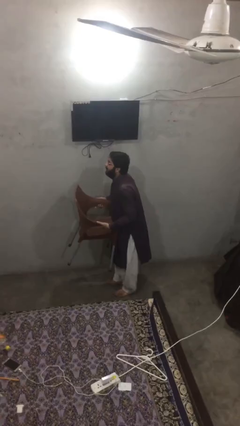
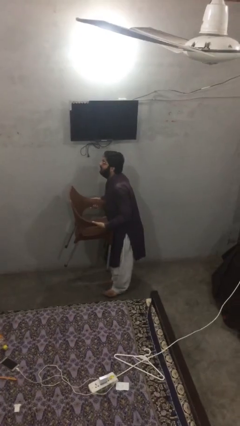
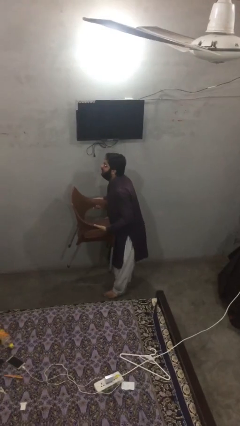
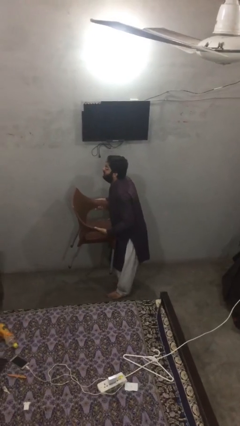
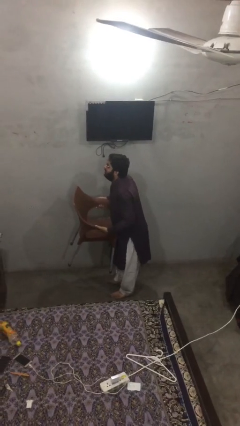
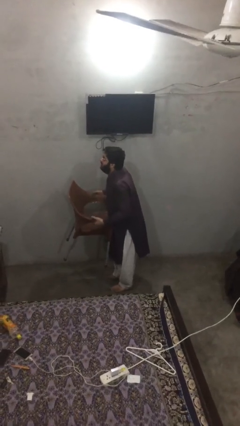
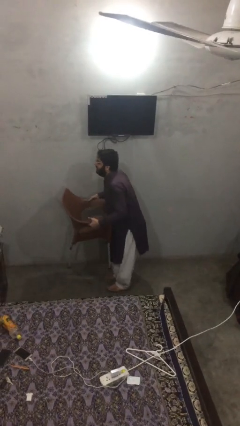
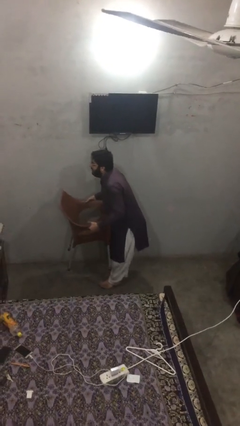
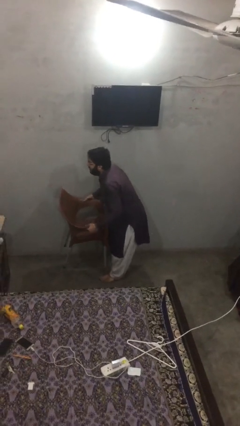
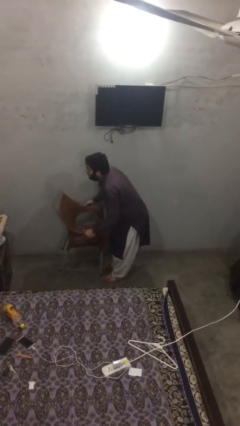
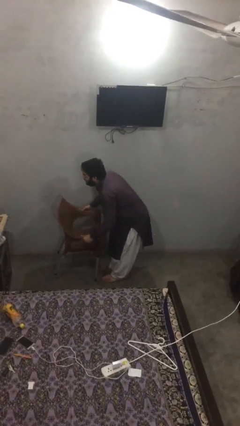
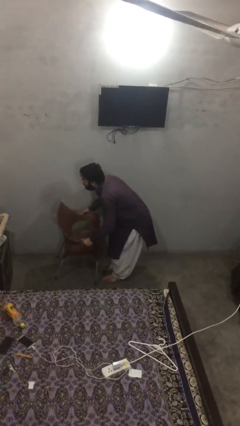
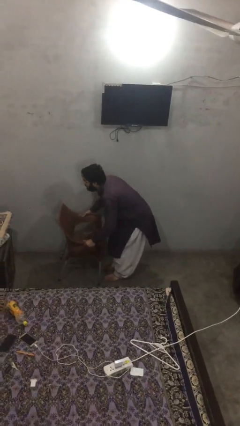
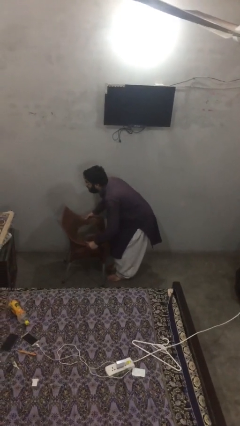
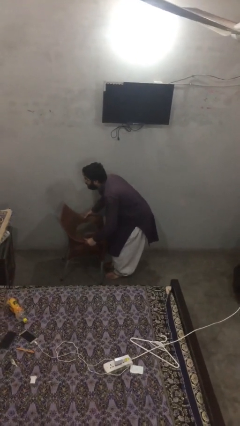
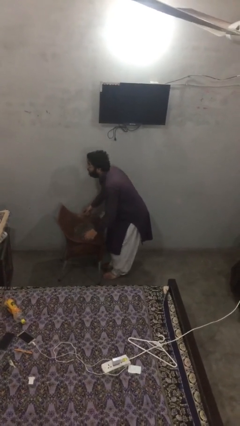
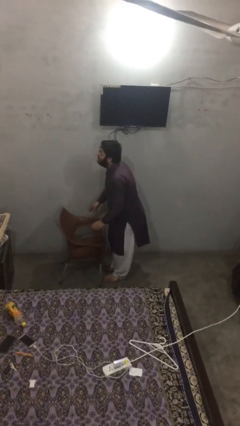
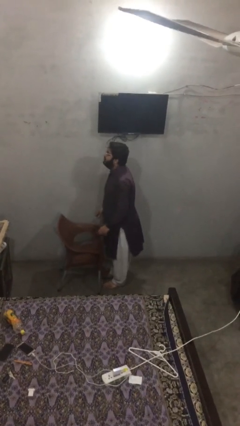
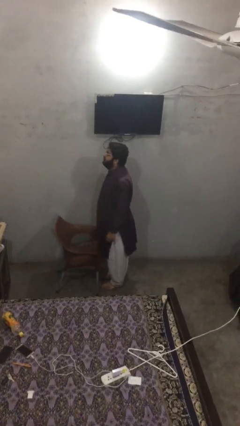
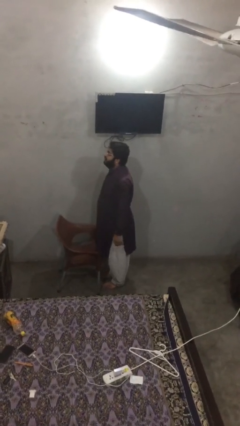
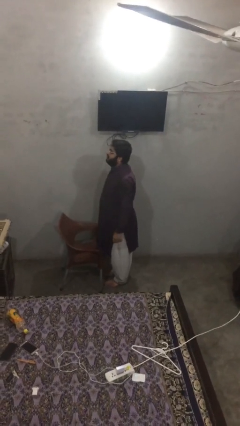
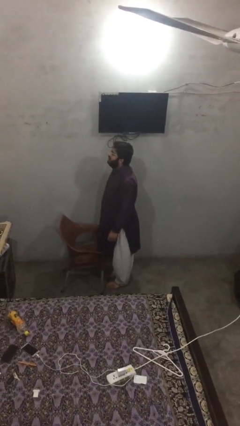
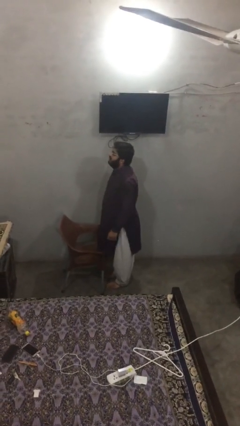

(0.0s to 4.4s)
person puts down object on floor

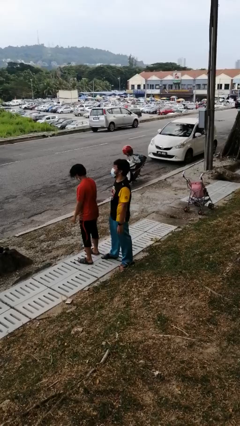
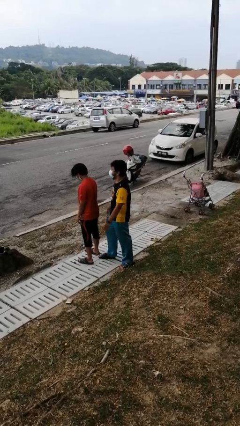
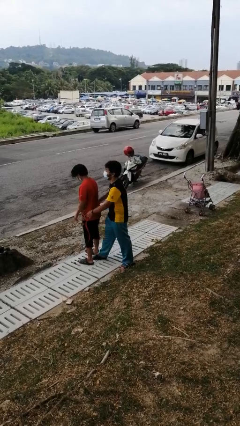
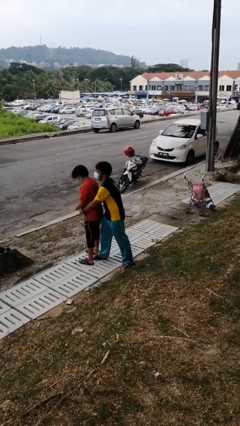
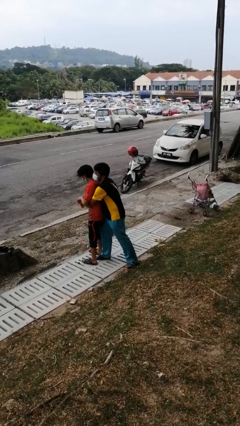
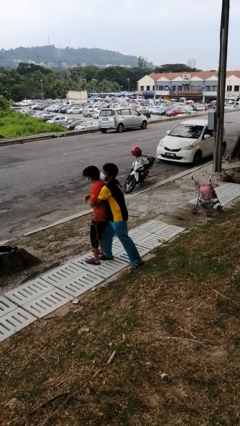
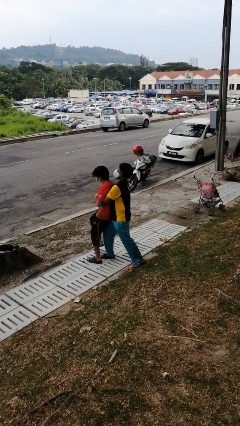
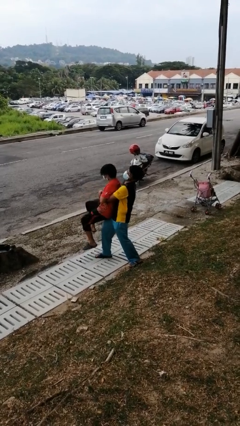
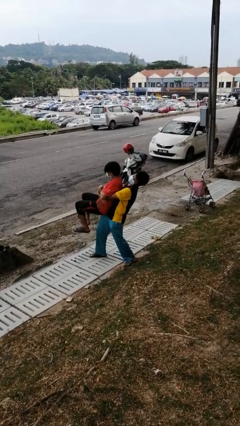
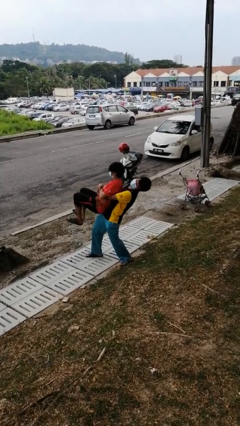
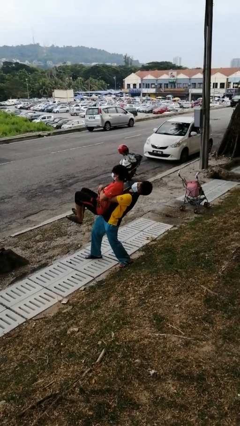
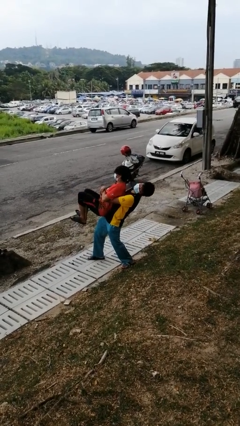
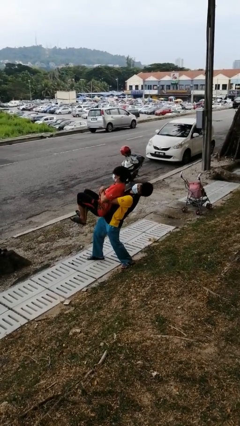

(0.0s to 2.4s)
person picks up person

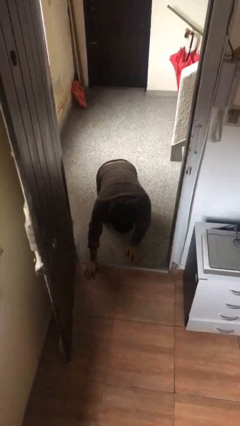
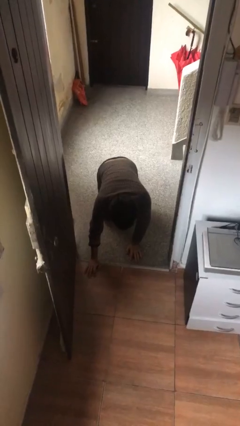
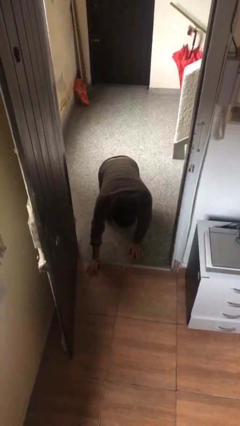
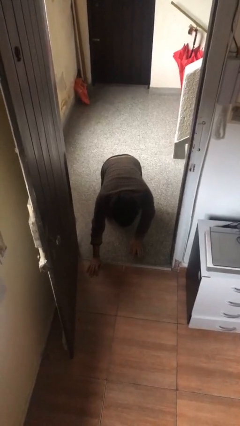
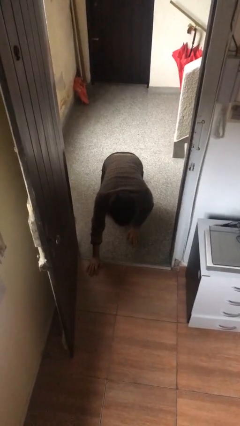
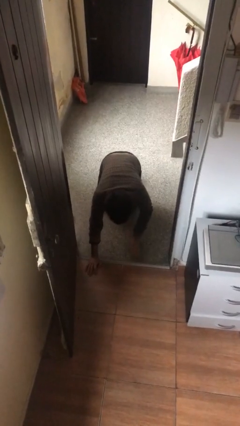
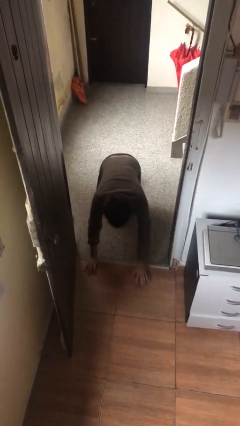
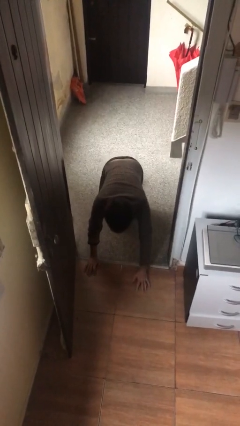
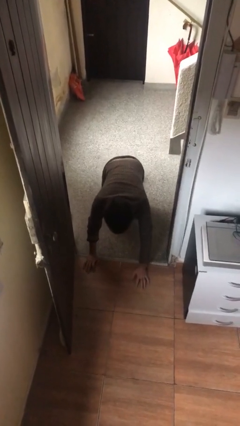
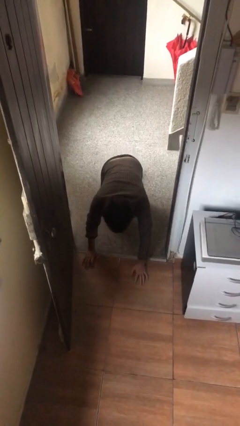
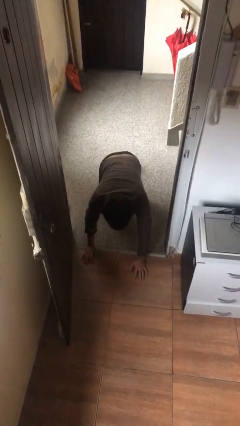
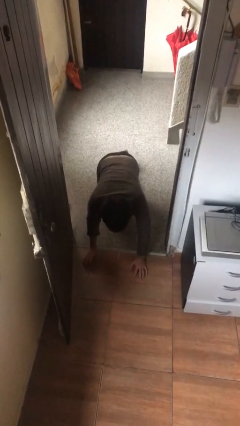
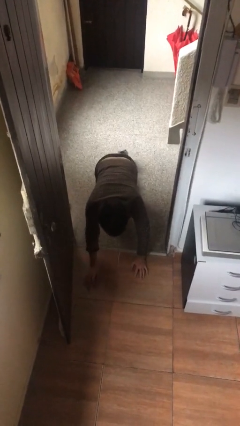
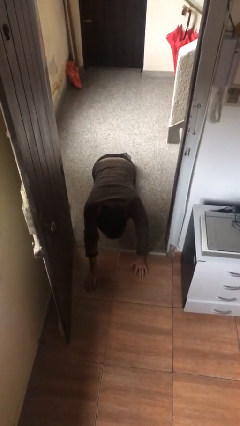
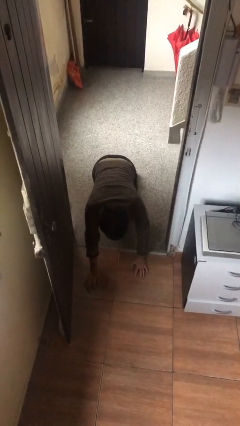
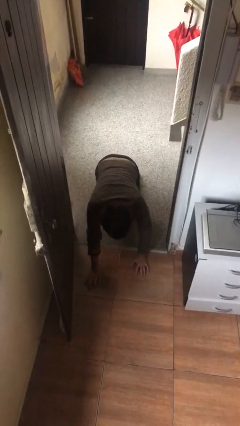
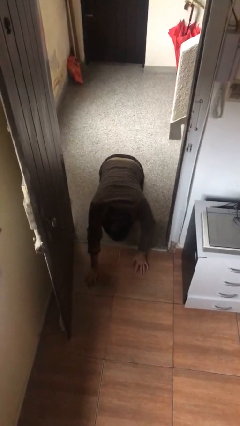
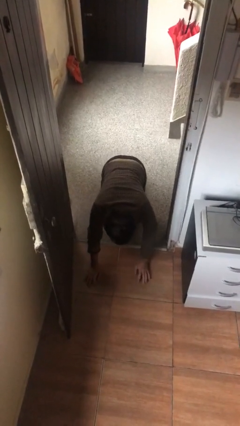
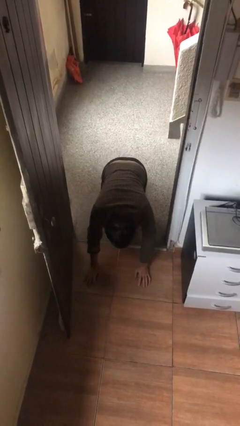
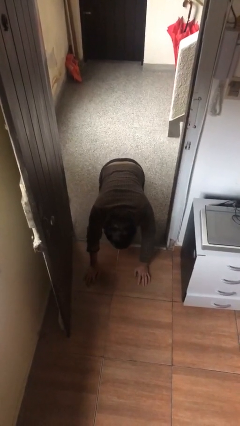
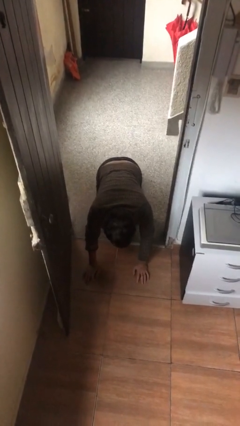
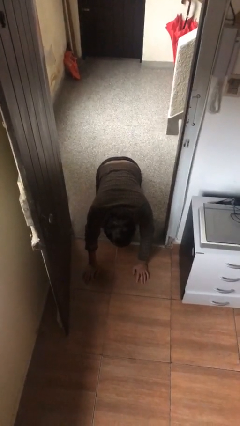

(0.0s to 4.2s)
person crawls

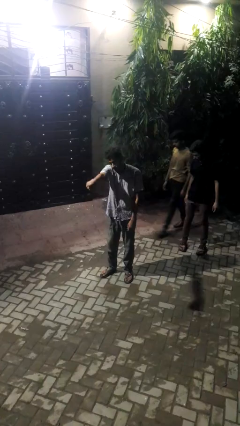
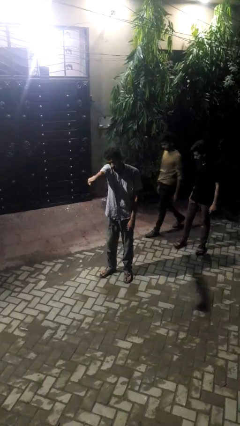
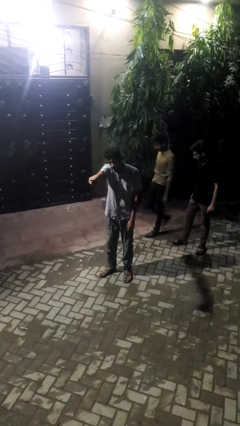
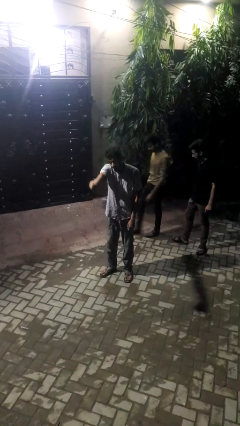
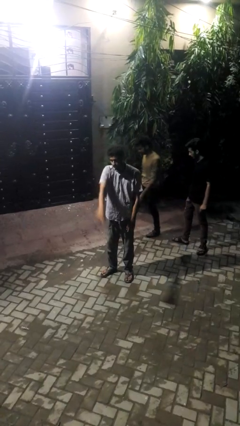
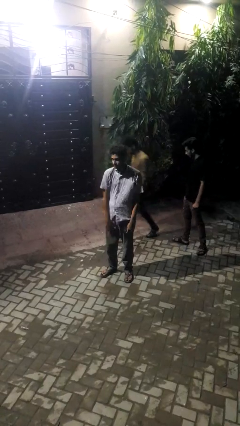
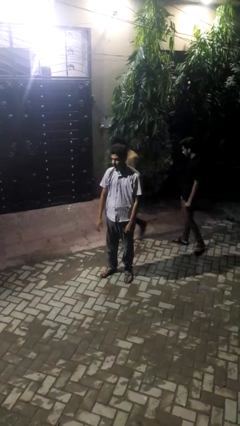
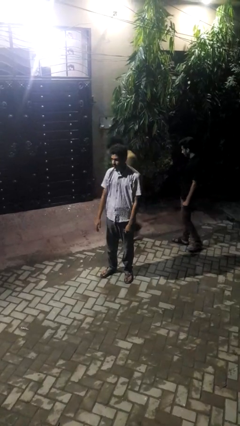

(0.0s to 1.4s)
person points at person

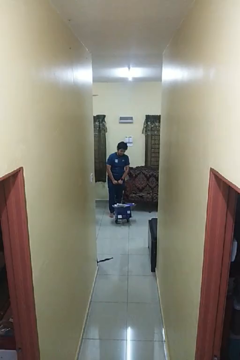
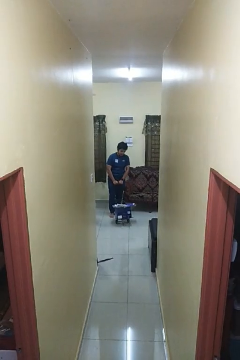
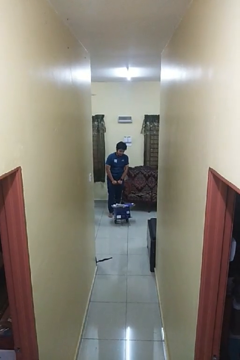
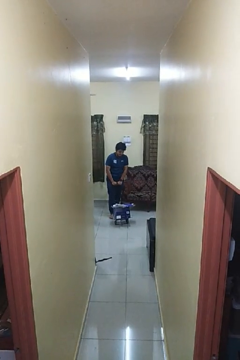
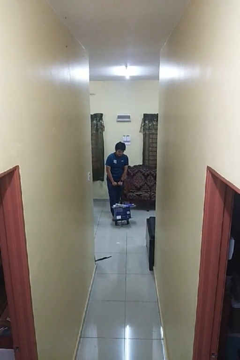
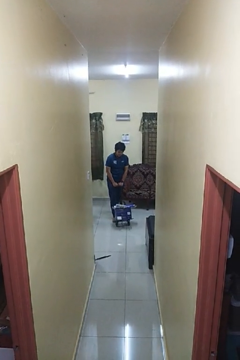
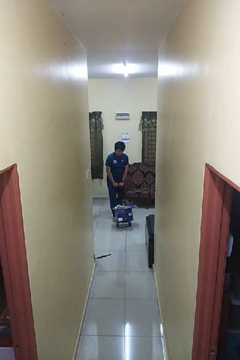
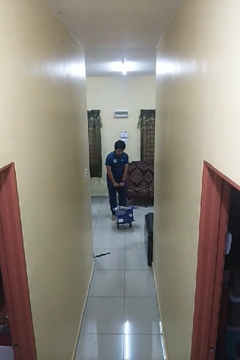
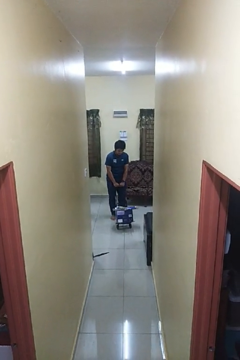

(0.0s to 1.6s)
person pushes wheeled cart

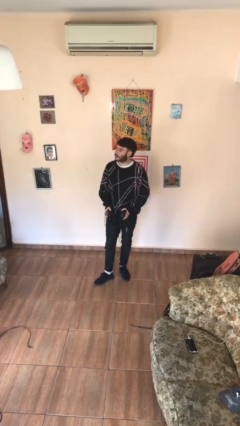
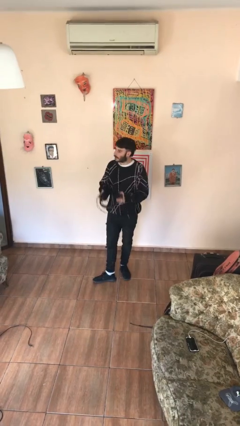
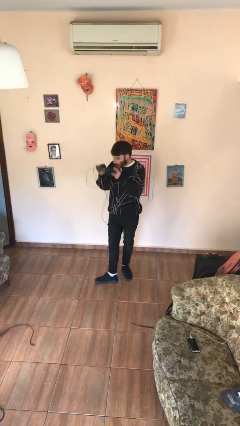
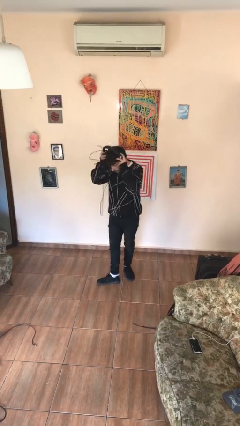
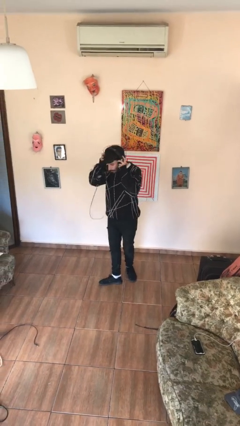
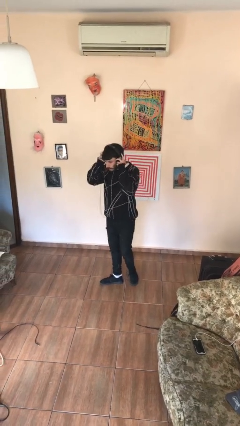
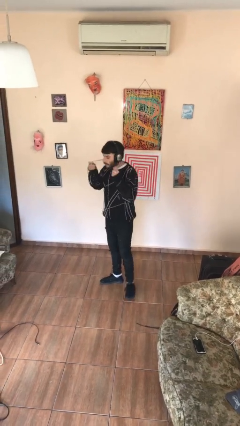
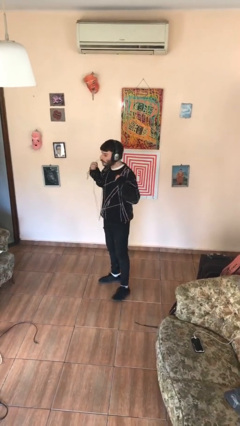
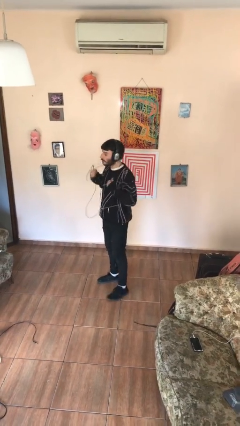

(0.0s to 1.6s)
person puts on headphones

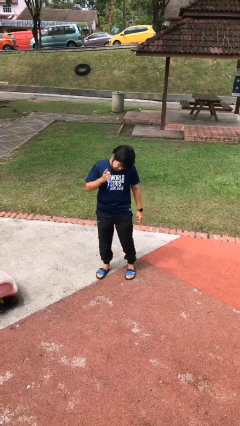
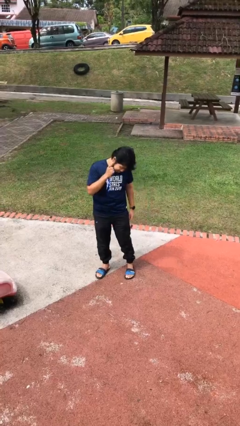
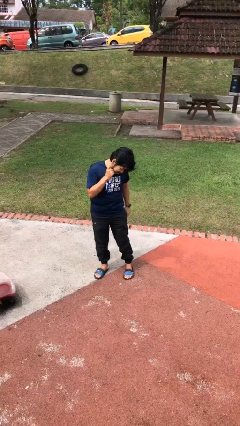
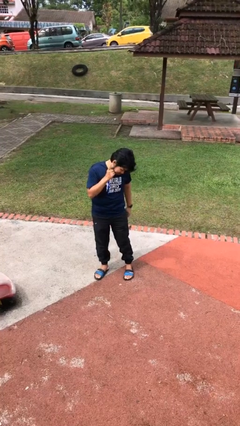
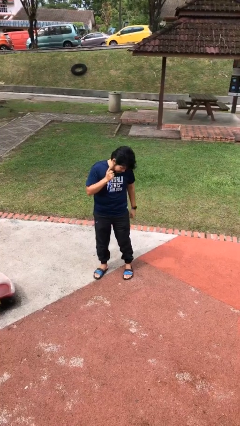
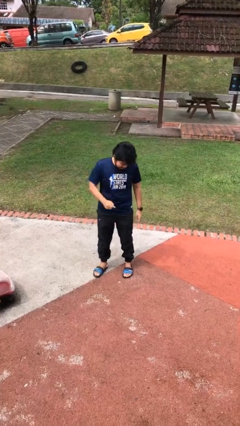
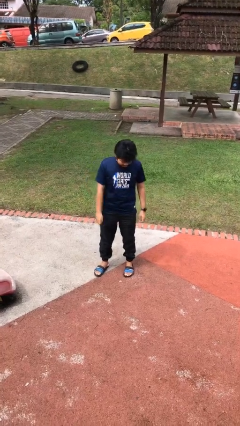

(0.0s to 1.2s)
person gestures listen closely

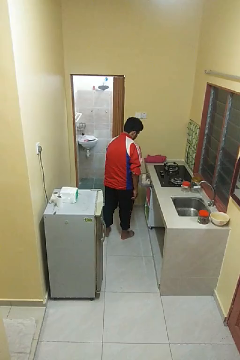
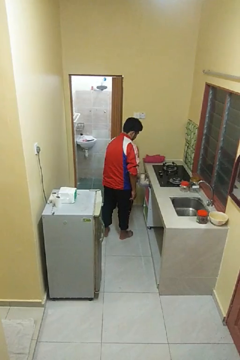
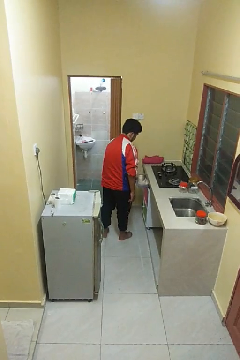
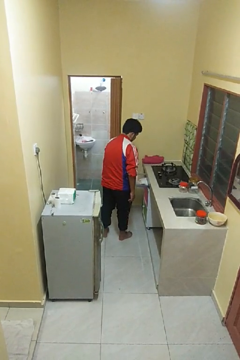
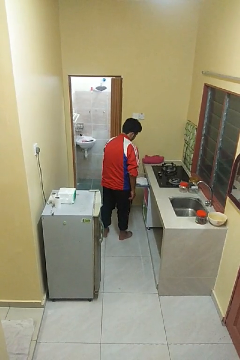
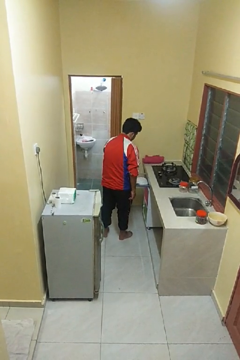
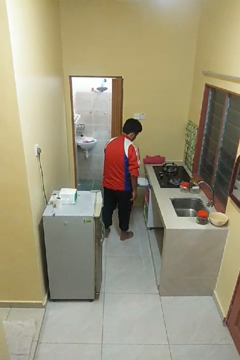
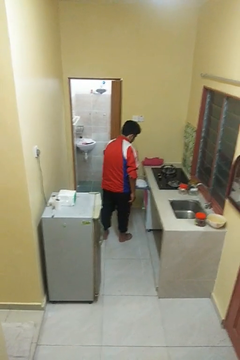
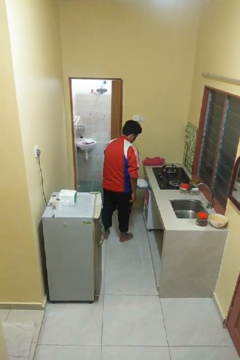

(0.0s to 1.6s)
person opens kitchen drawer
